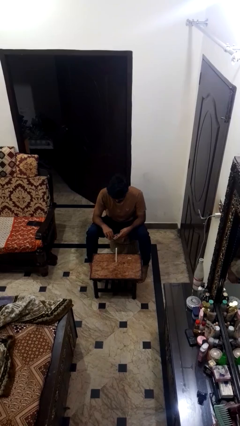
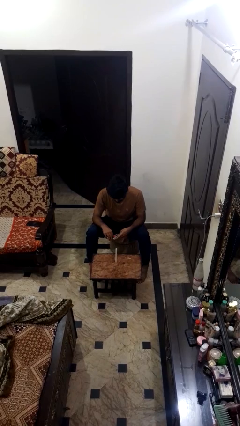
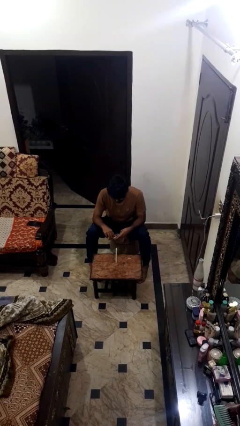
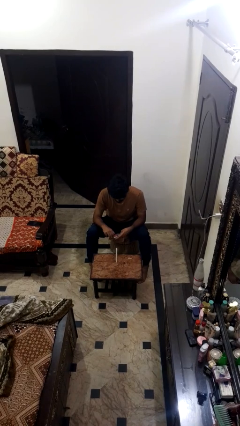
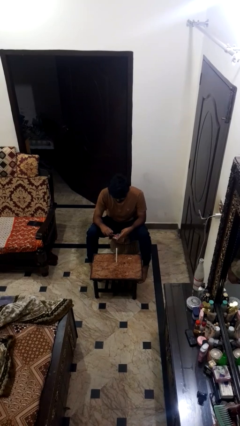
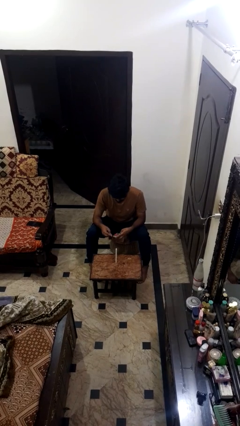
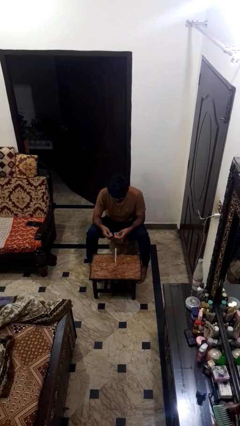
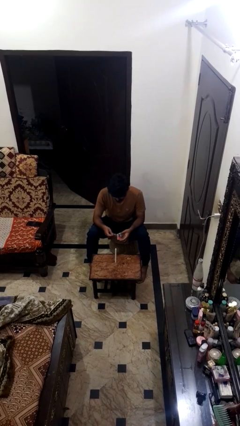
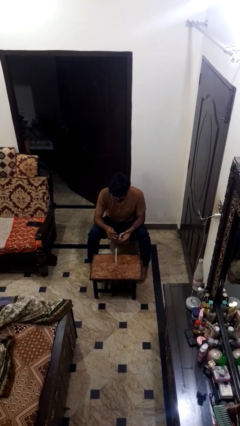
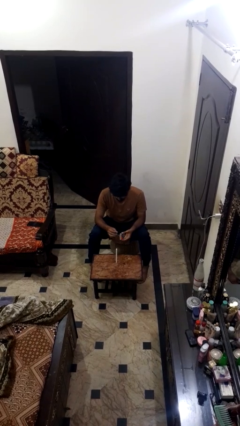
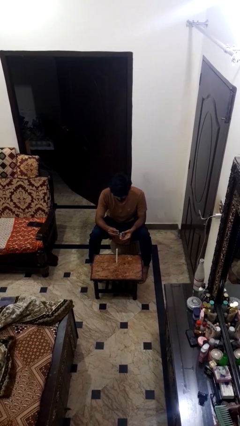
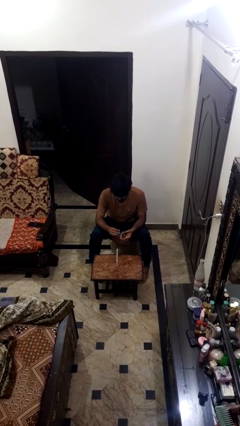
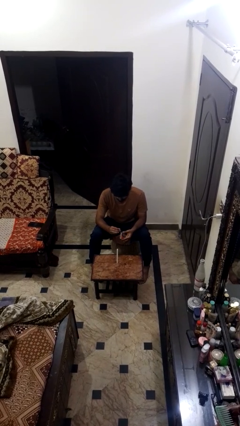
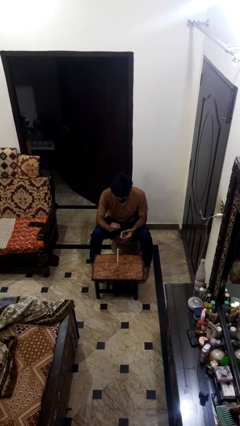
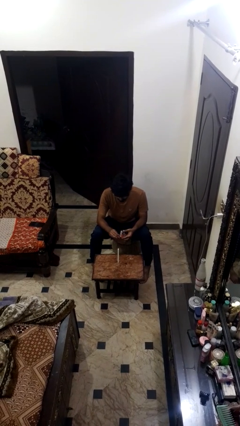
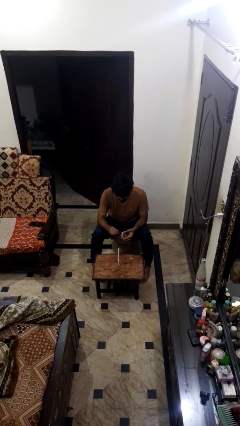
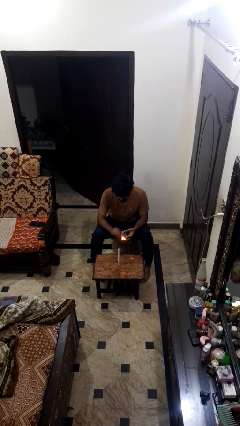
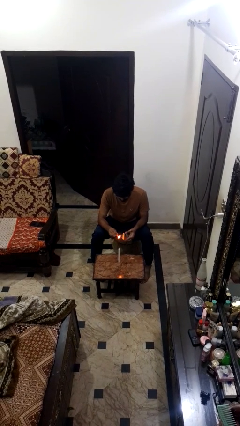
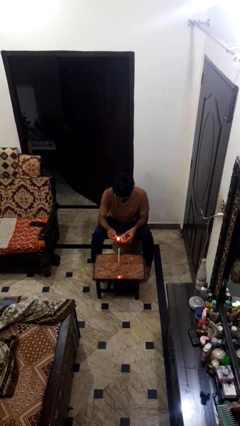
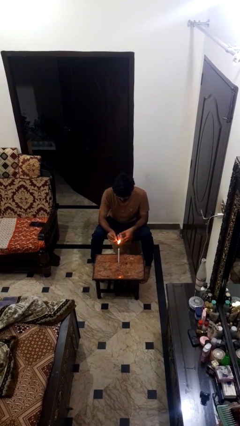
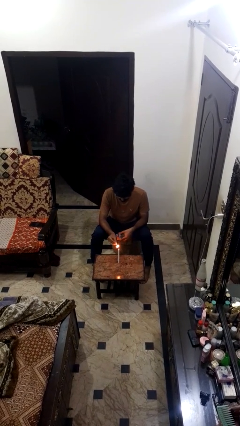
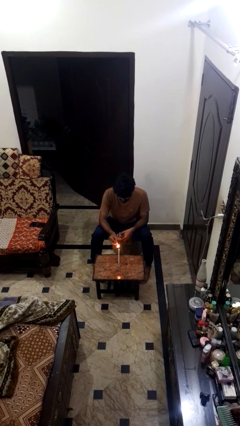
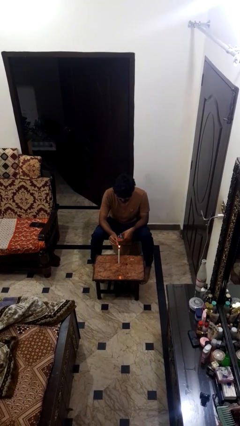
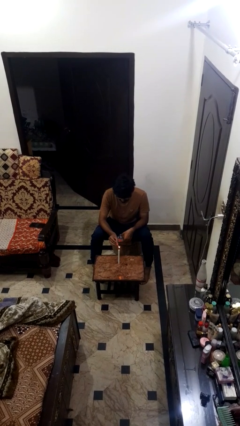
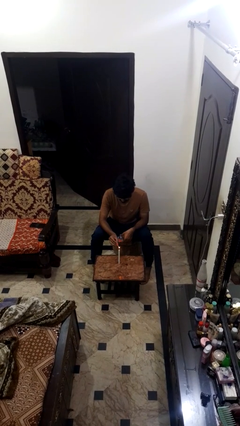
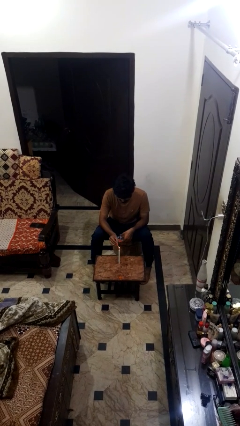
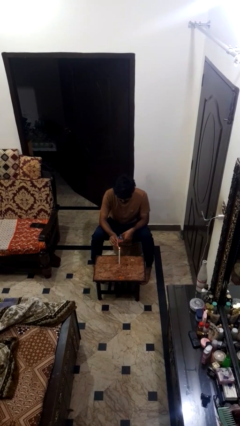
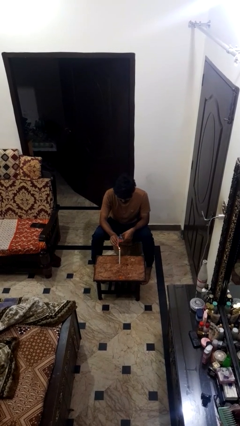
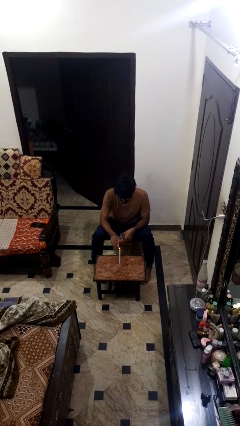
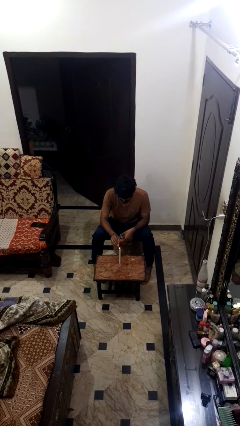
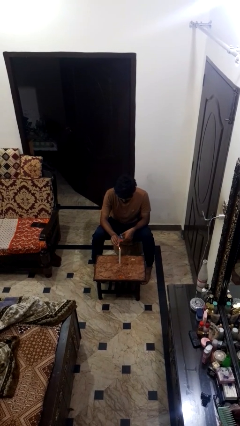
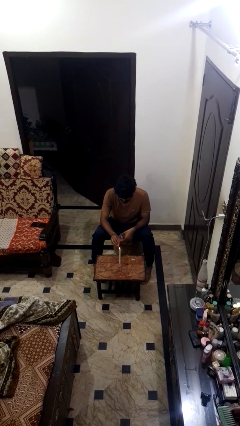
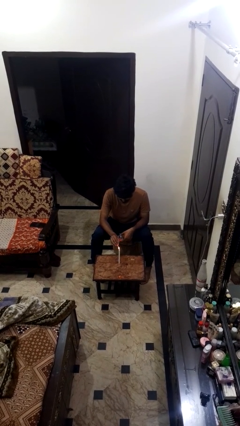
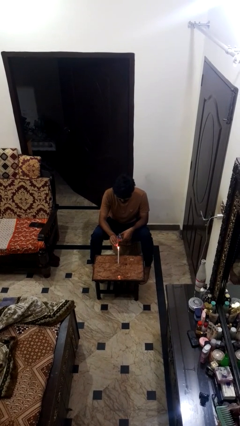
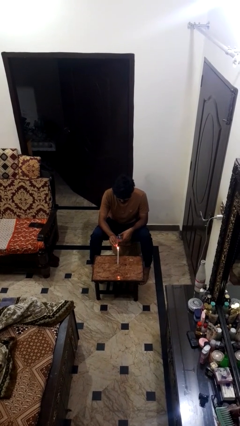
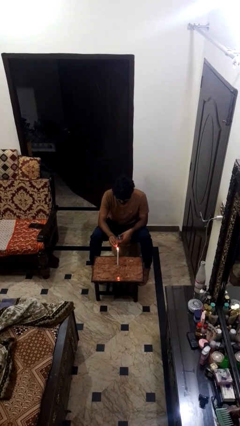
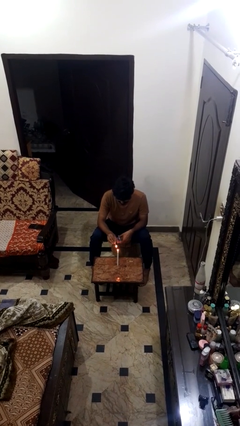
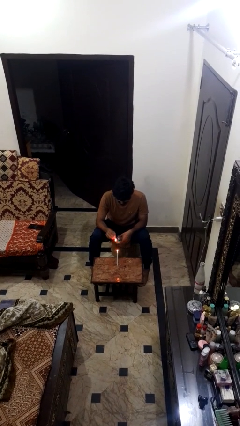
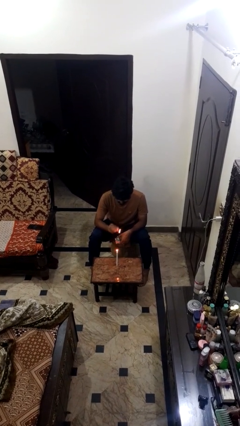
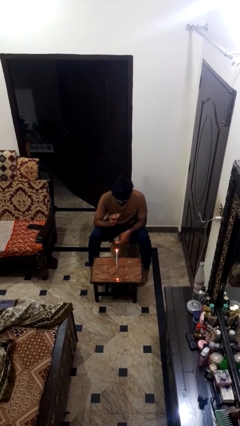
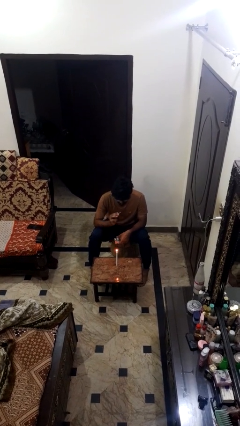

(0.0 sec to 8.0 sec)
person lights candle

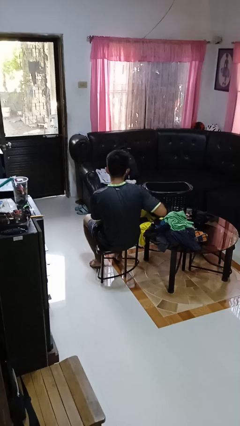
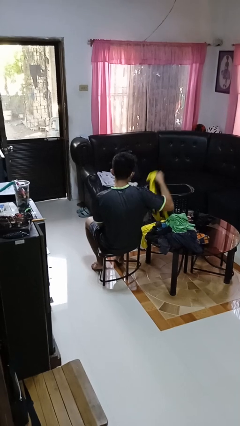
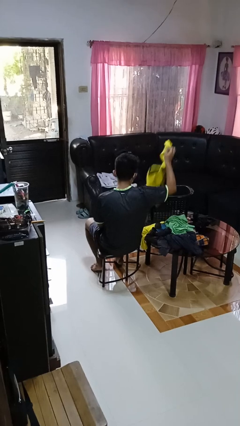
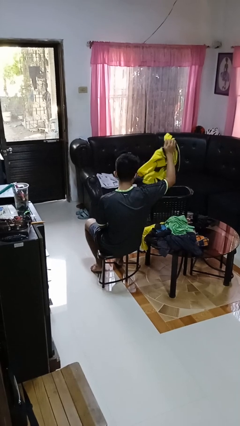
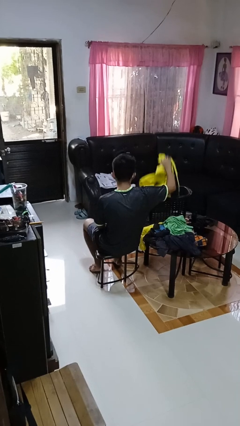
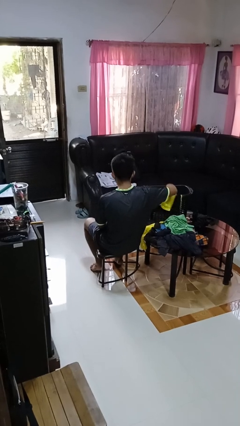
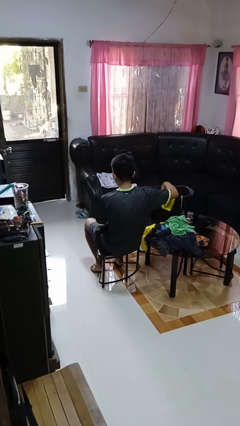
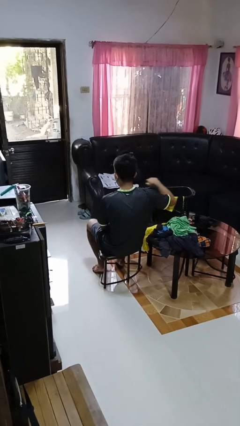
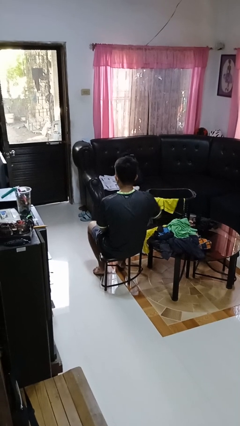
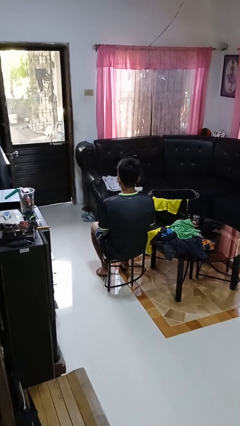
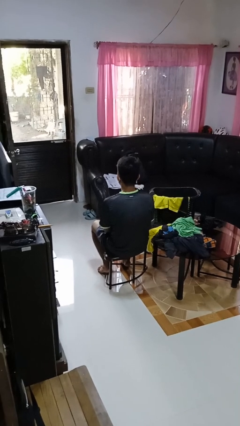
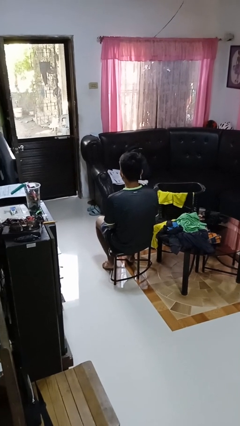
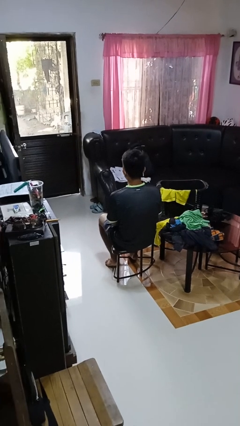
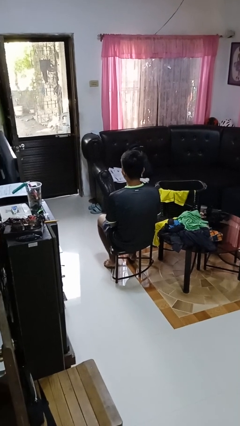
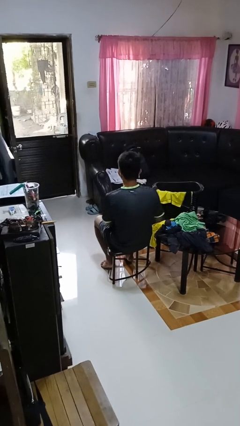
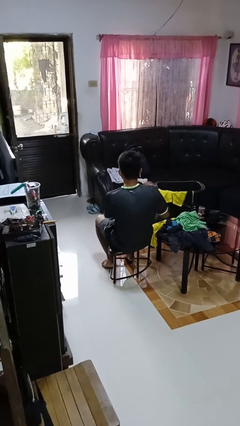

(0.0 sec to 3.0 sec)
person puts object into basket

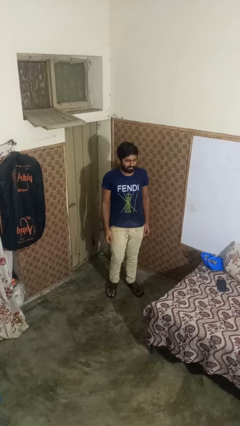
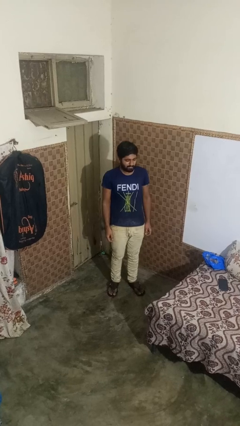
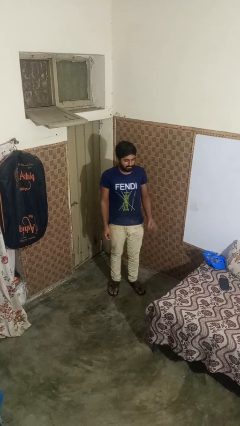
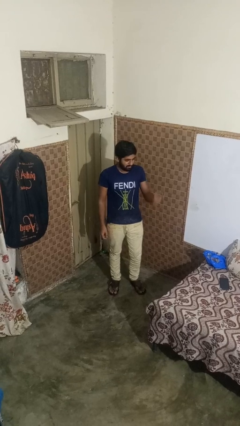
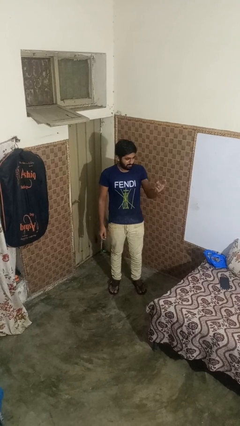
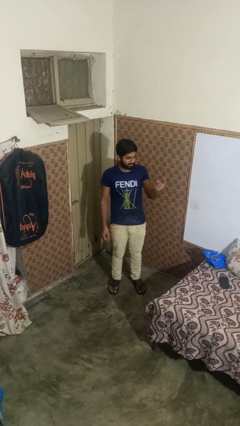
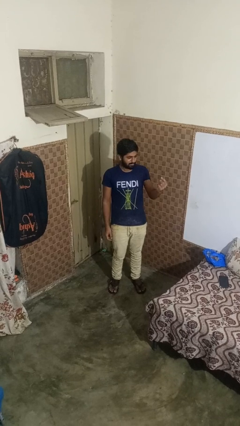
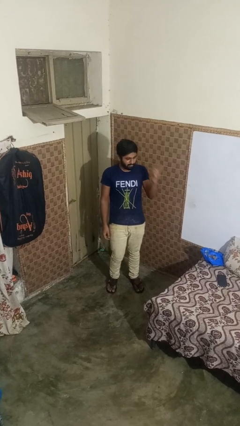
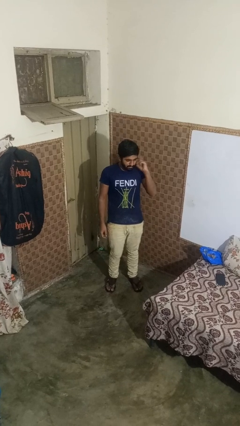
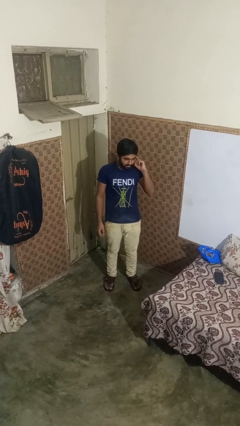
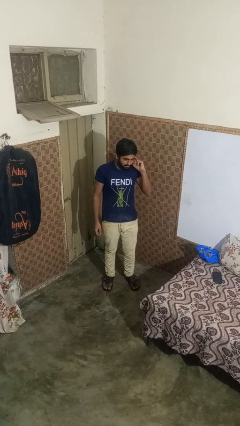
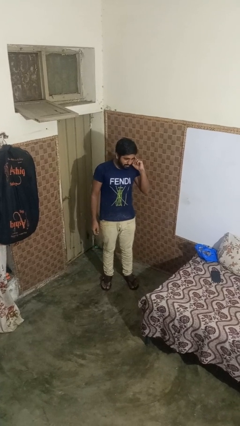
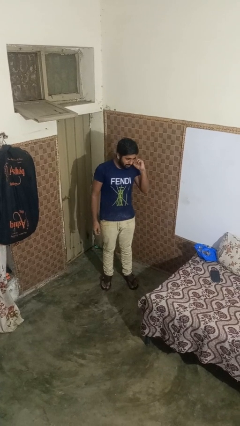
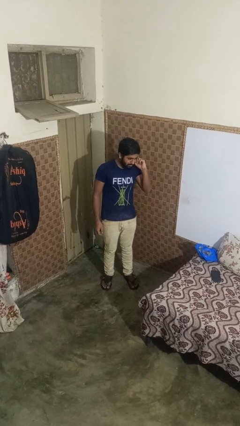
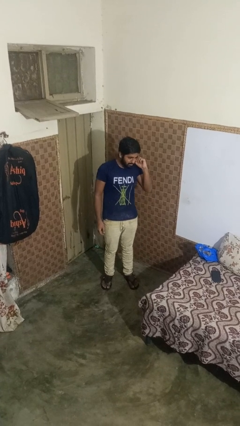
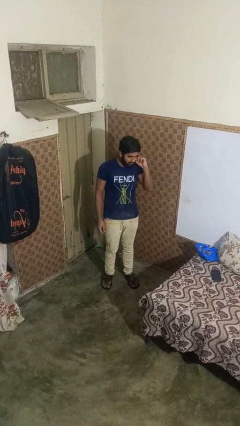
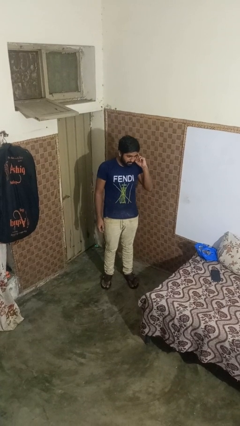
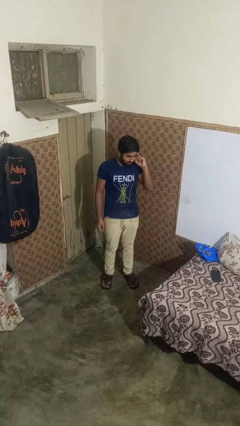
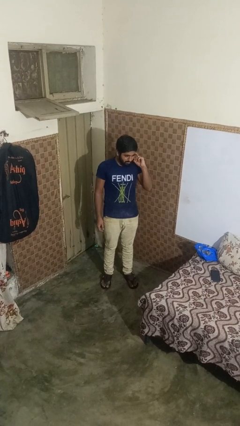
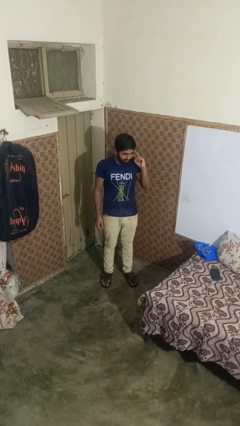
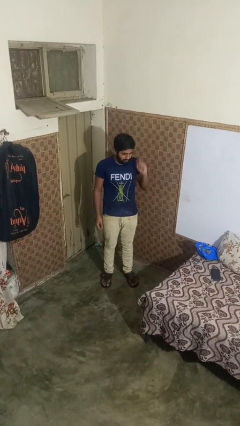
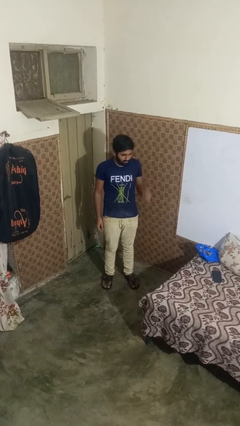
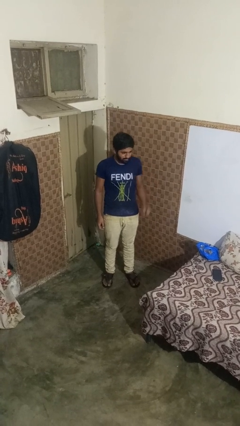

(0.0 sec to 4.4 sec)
person gestures listen closely

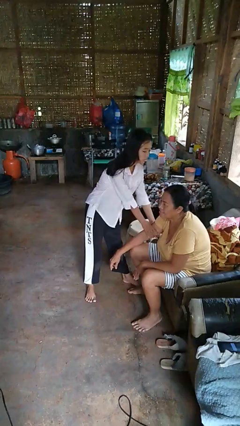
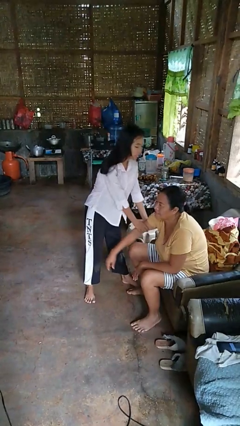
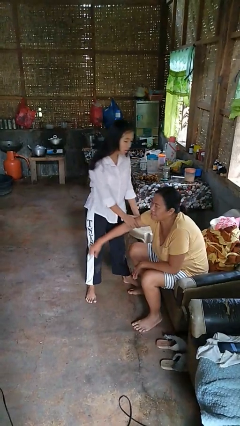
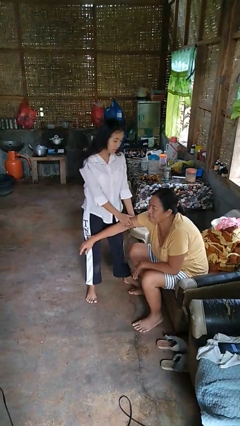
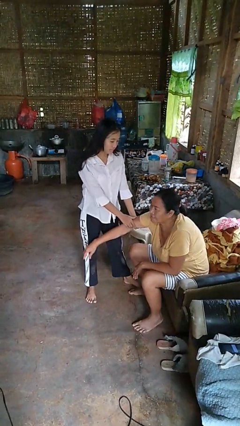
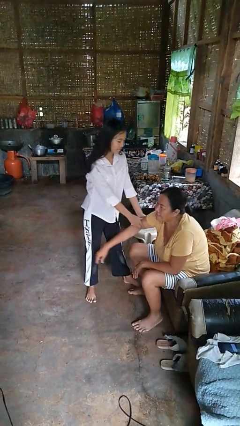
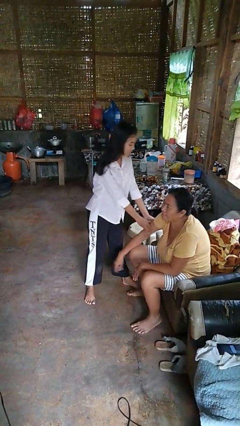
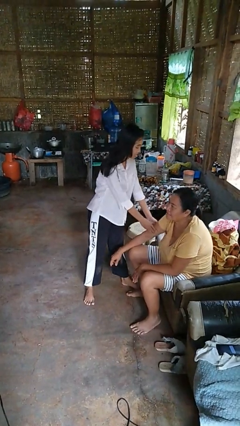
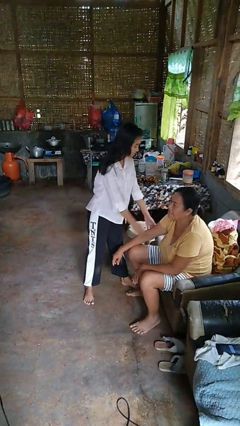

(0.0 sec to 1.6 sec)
person grabs person by bicep

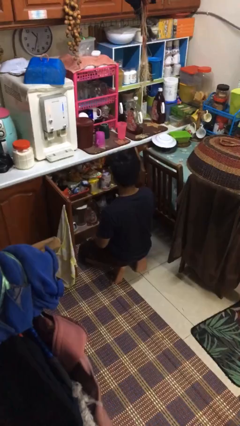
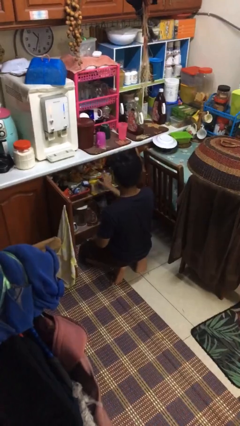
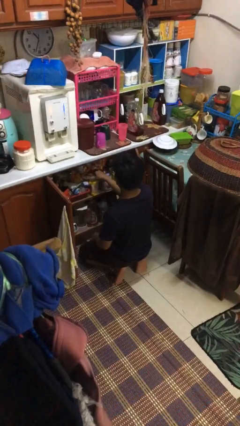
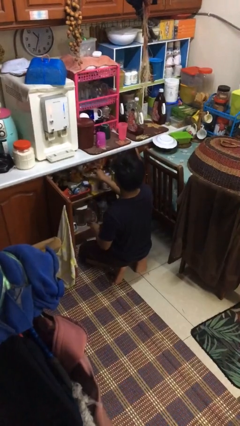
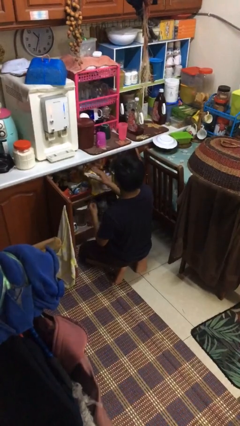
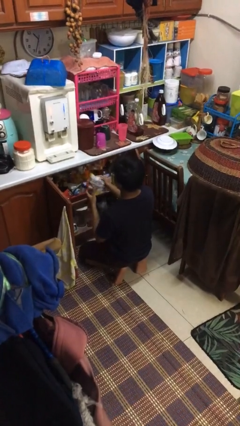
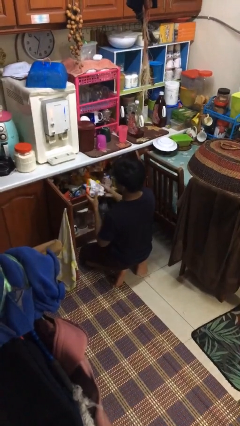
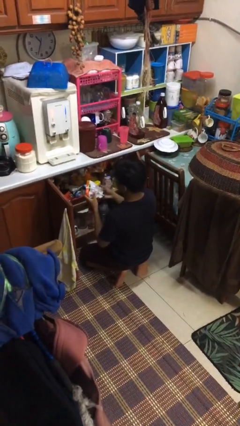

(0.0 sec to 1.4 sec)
person takes object from cabinet
